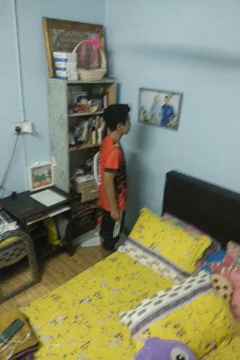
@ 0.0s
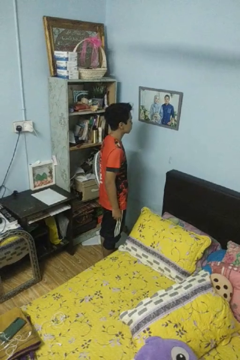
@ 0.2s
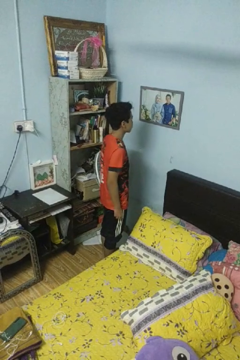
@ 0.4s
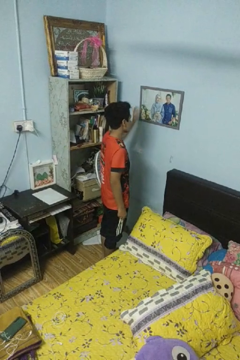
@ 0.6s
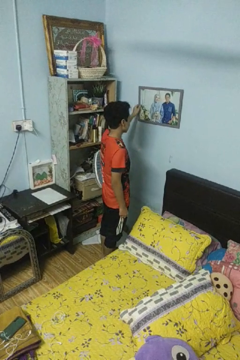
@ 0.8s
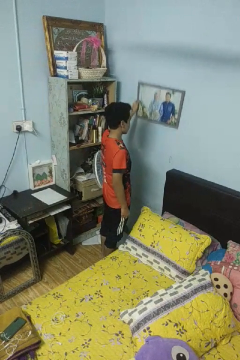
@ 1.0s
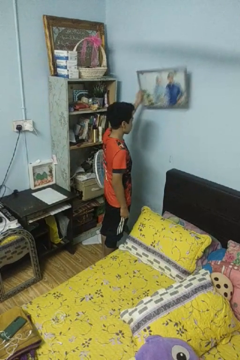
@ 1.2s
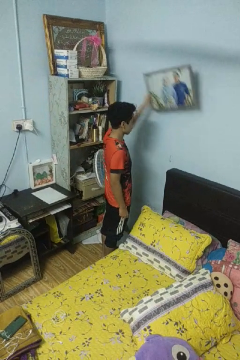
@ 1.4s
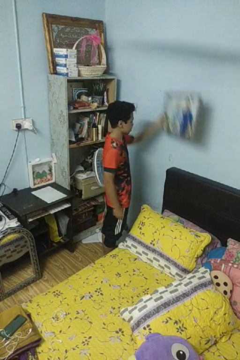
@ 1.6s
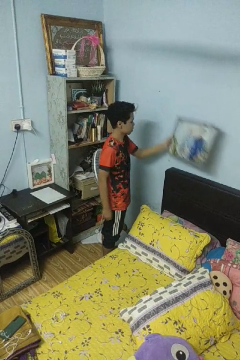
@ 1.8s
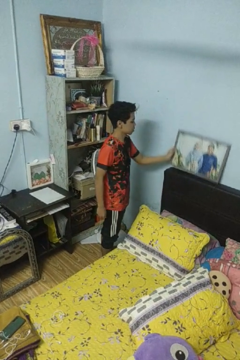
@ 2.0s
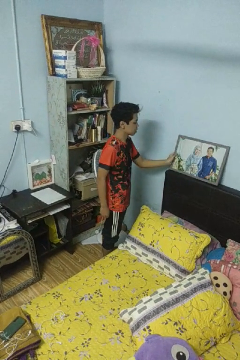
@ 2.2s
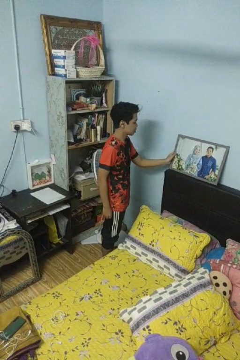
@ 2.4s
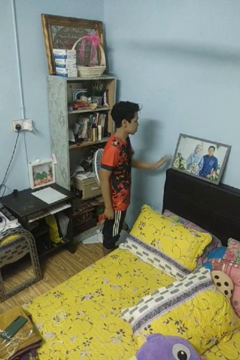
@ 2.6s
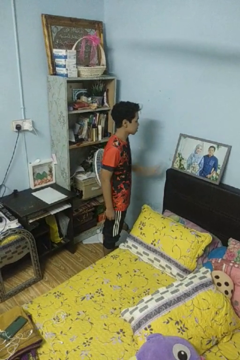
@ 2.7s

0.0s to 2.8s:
person takes down picture frame

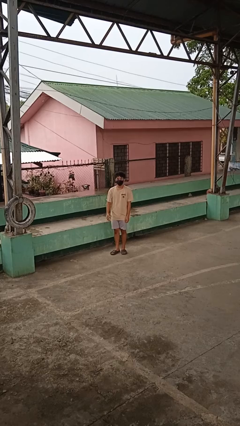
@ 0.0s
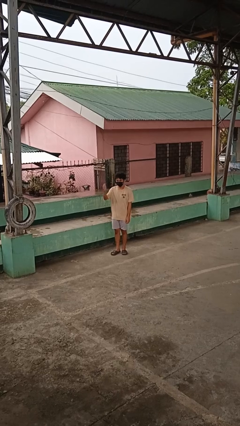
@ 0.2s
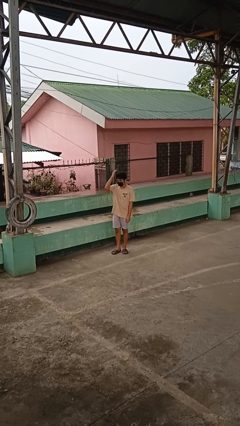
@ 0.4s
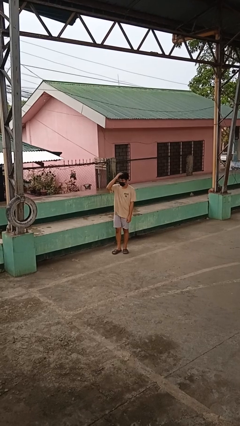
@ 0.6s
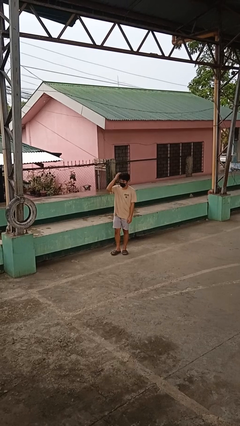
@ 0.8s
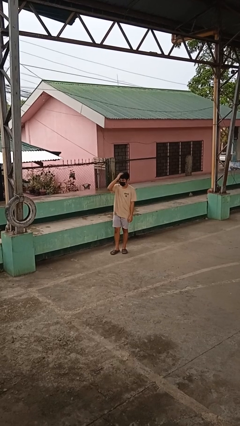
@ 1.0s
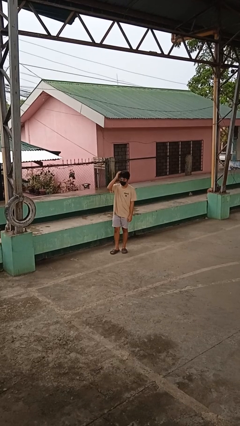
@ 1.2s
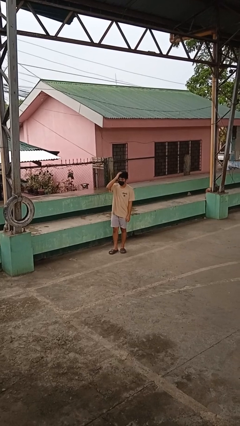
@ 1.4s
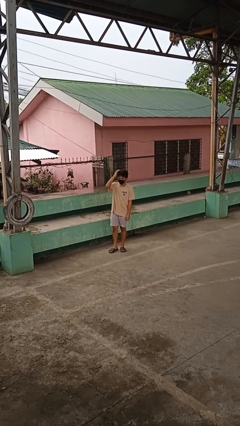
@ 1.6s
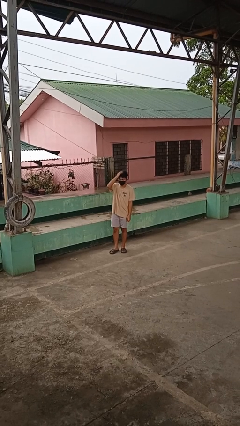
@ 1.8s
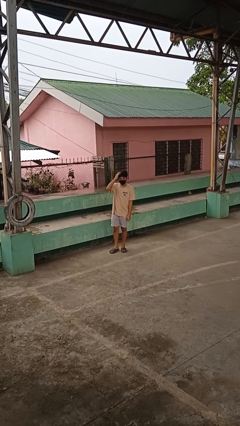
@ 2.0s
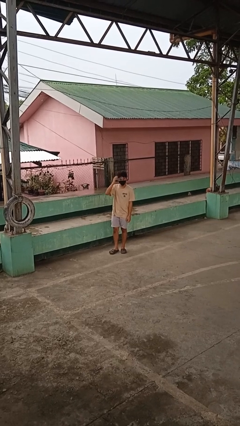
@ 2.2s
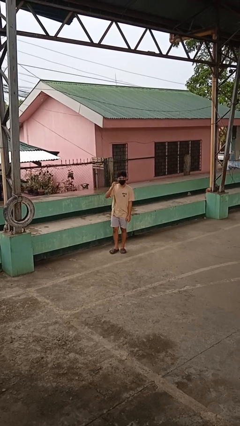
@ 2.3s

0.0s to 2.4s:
person pats head

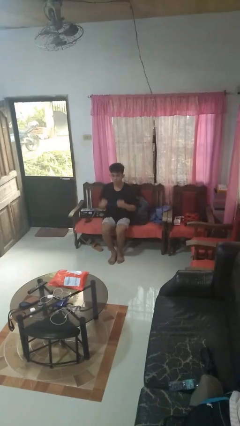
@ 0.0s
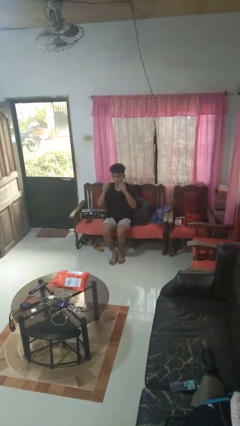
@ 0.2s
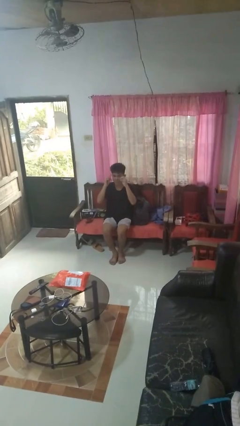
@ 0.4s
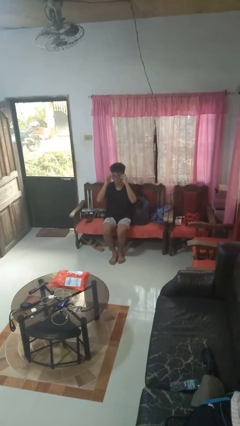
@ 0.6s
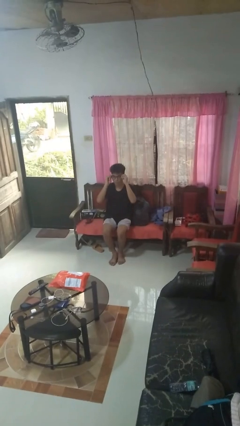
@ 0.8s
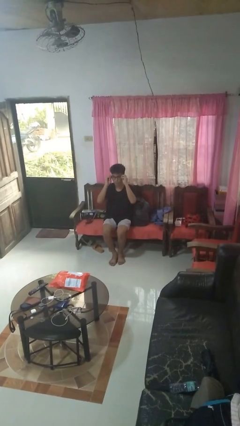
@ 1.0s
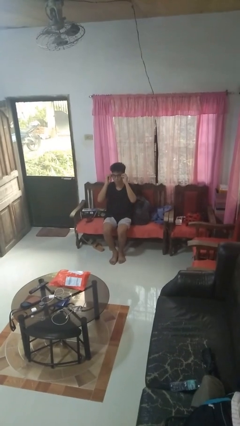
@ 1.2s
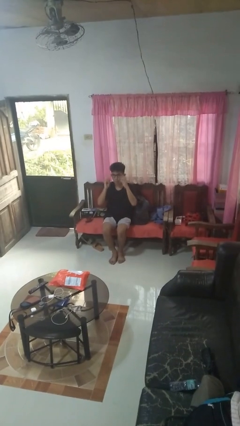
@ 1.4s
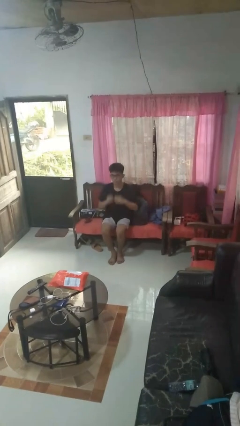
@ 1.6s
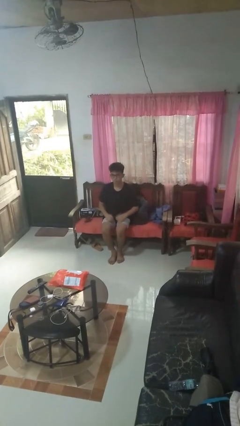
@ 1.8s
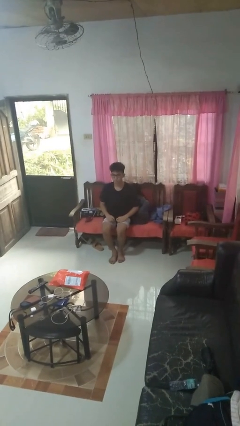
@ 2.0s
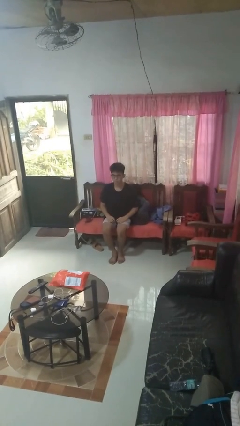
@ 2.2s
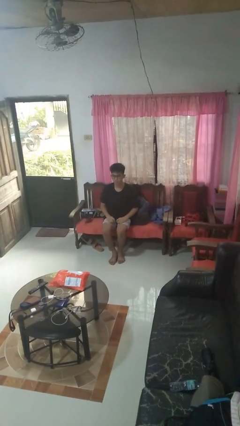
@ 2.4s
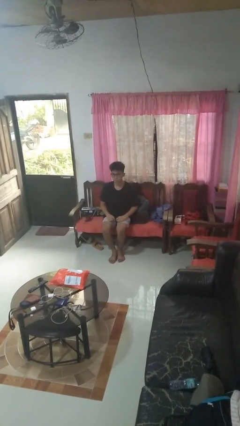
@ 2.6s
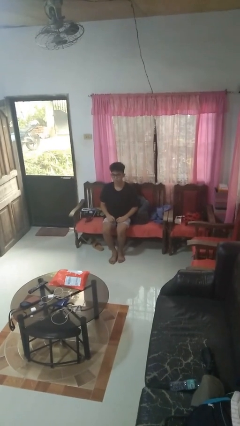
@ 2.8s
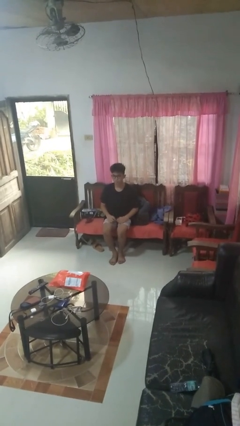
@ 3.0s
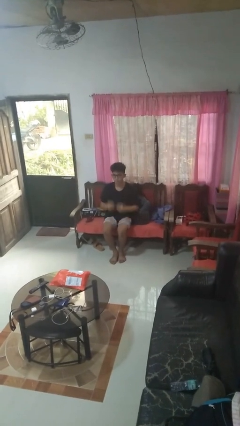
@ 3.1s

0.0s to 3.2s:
person puts on glasses

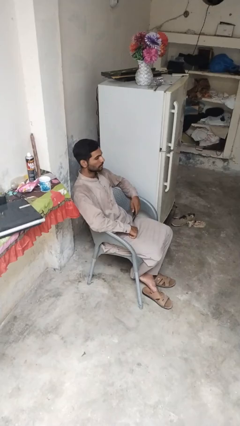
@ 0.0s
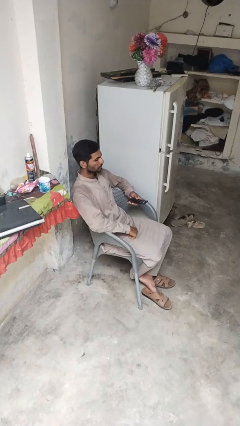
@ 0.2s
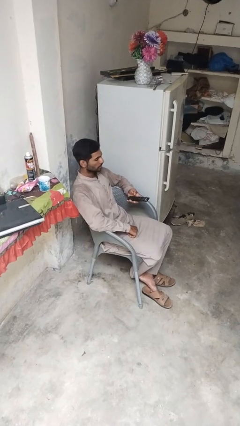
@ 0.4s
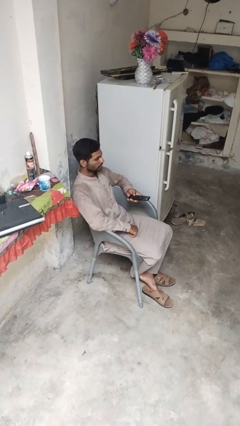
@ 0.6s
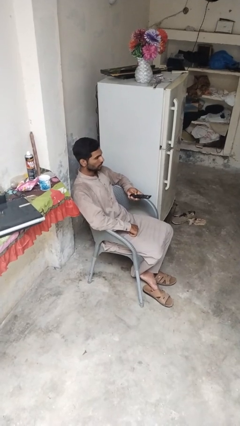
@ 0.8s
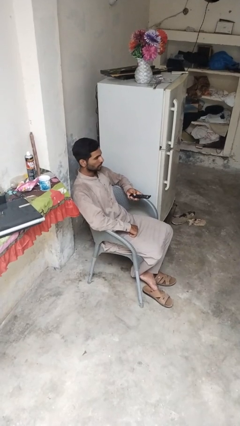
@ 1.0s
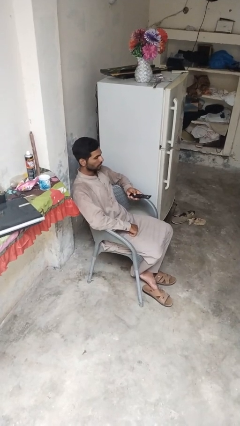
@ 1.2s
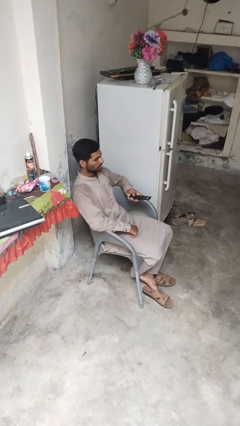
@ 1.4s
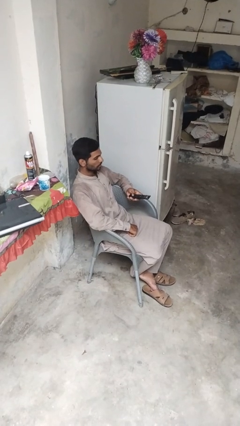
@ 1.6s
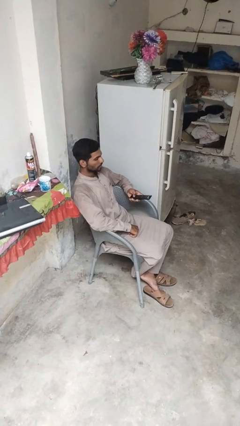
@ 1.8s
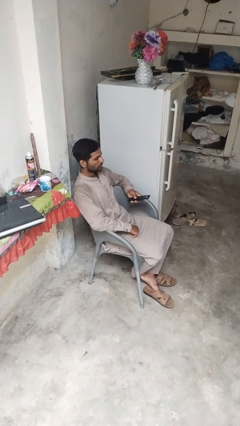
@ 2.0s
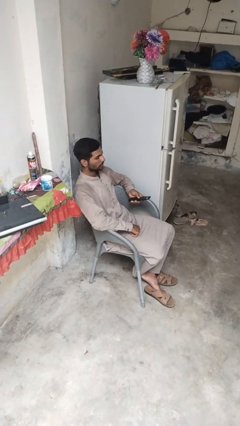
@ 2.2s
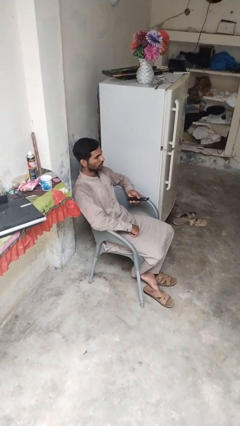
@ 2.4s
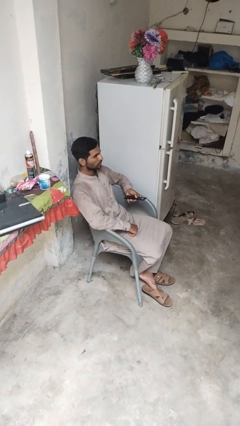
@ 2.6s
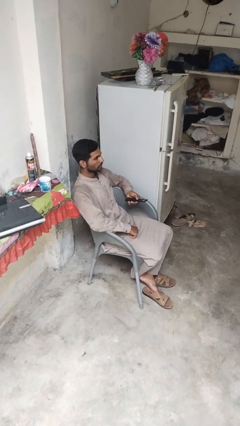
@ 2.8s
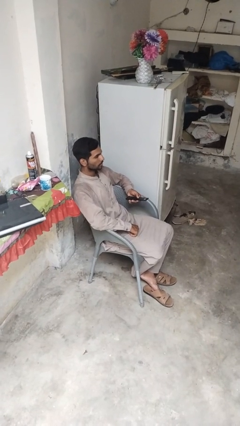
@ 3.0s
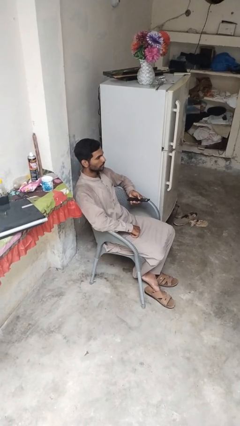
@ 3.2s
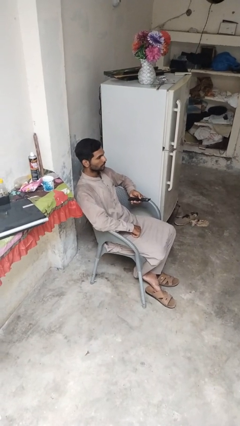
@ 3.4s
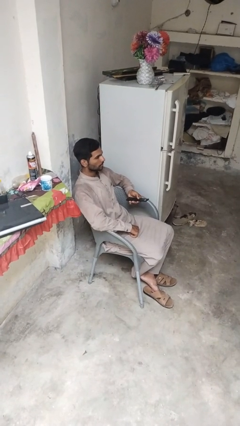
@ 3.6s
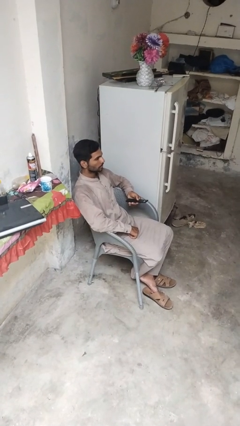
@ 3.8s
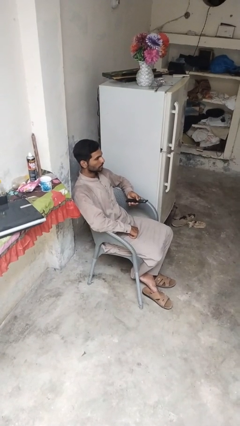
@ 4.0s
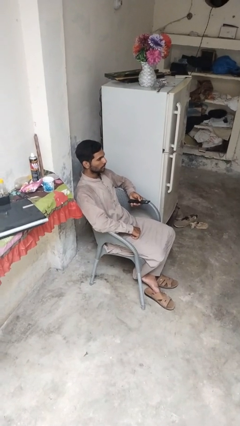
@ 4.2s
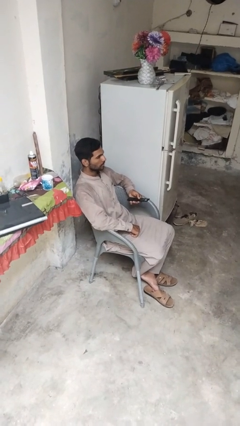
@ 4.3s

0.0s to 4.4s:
person uses television remote

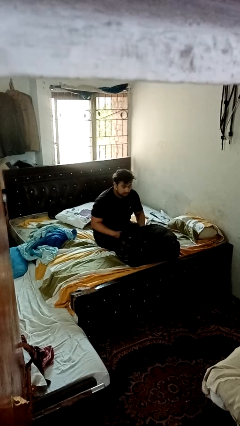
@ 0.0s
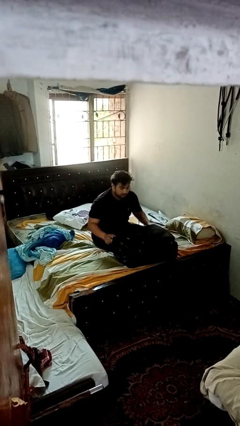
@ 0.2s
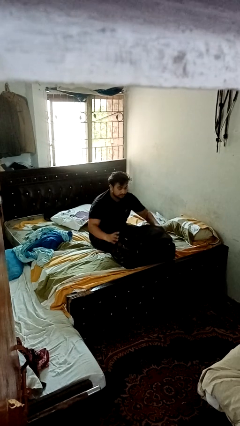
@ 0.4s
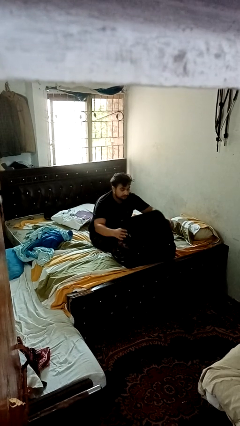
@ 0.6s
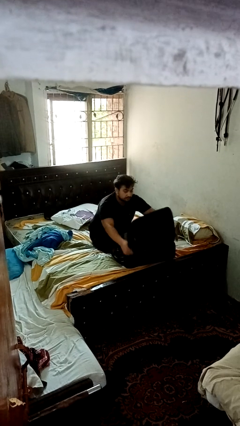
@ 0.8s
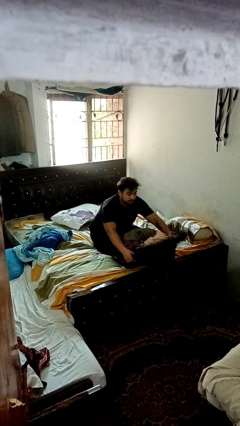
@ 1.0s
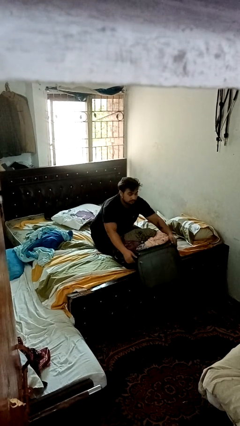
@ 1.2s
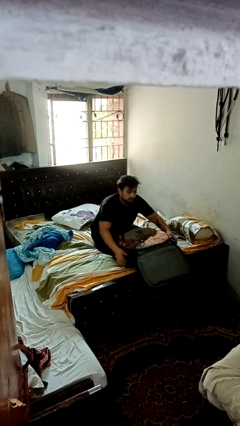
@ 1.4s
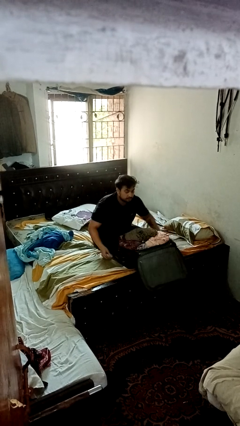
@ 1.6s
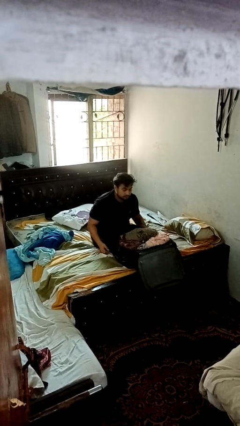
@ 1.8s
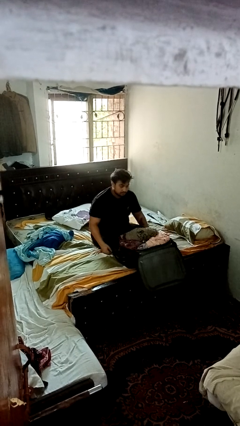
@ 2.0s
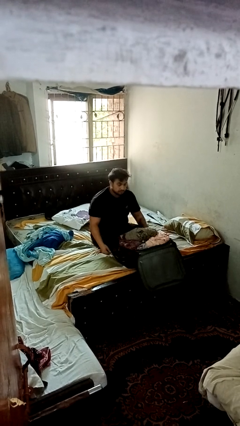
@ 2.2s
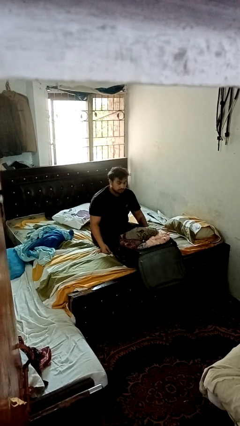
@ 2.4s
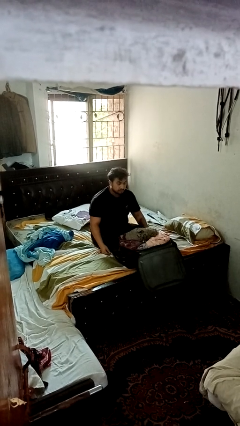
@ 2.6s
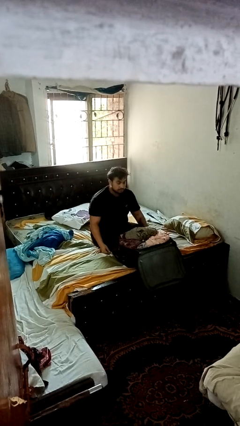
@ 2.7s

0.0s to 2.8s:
person opens suitcase

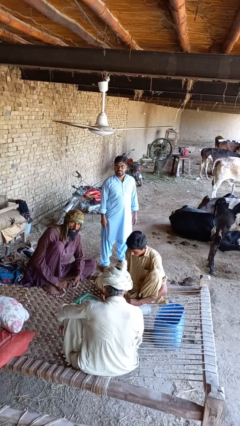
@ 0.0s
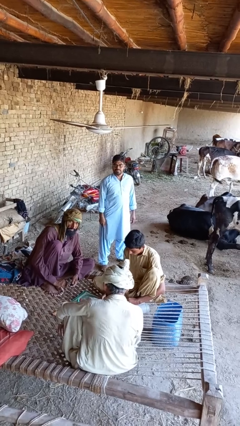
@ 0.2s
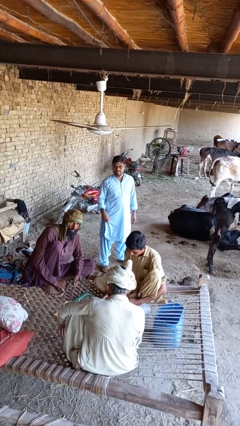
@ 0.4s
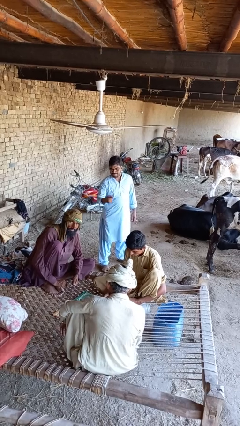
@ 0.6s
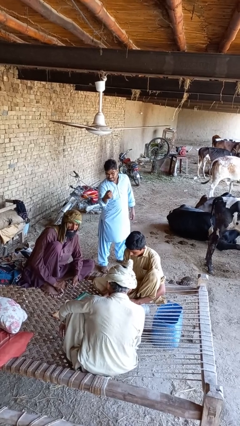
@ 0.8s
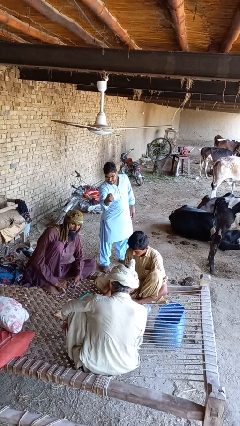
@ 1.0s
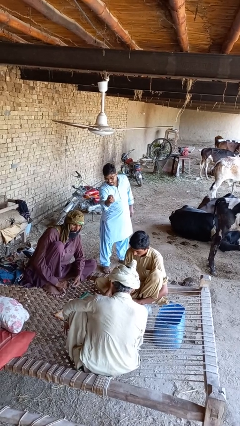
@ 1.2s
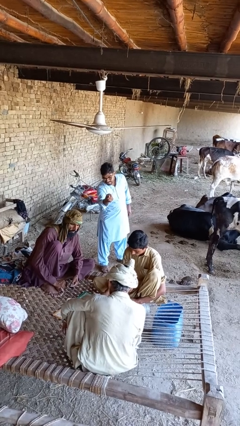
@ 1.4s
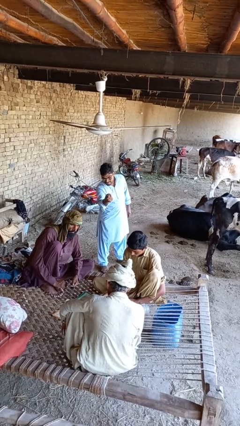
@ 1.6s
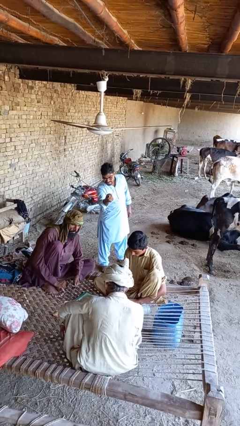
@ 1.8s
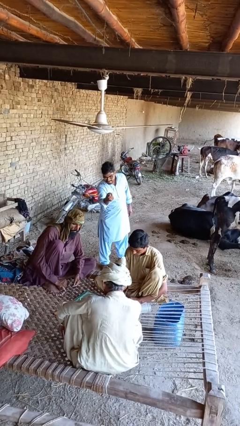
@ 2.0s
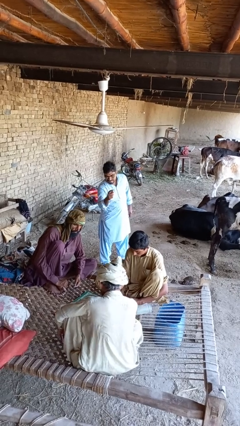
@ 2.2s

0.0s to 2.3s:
person points at person

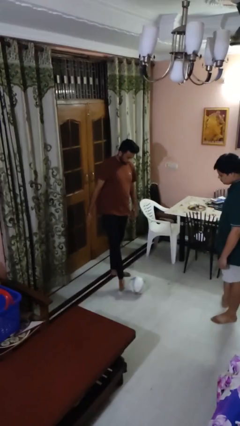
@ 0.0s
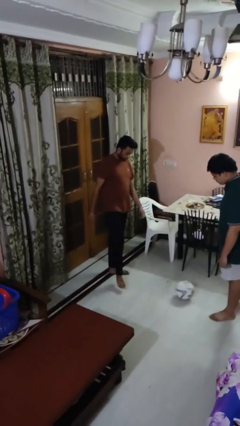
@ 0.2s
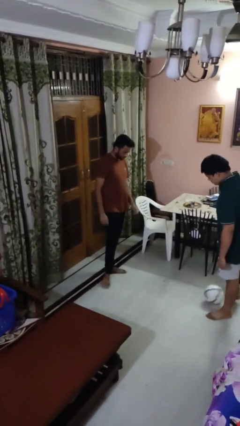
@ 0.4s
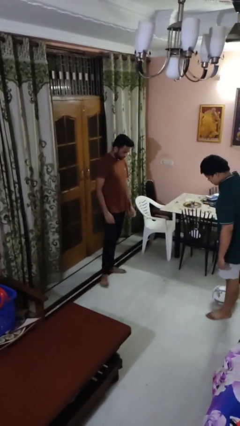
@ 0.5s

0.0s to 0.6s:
person kicks object to person
